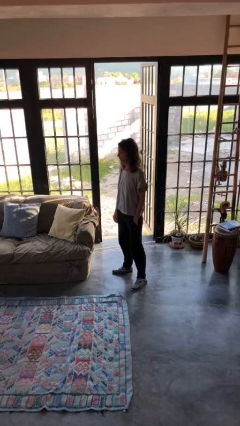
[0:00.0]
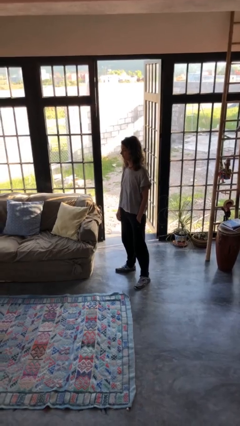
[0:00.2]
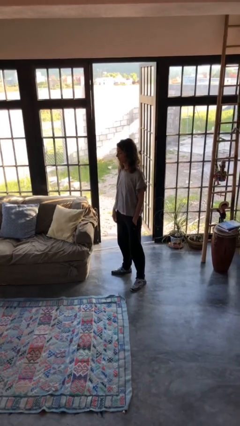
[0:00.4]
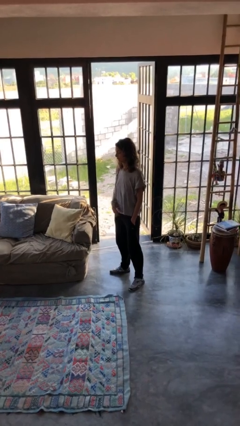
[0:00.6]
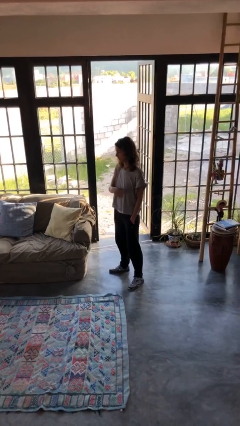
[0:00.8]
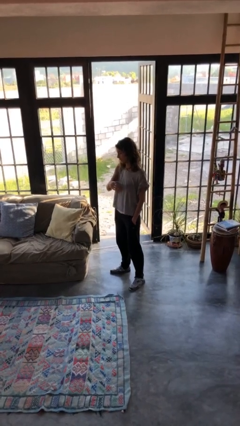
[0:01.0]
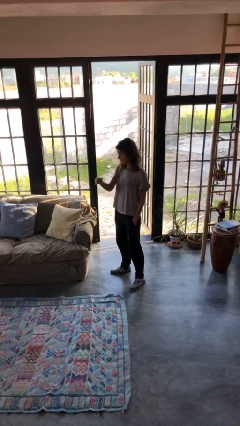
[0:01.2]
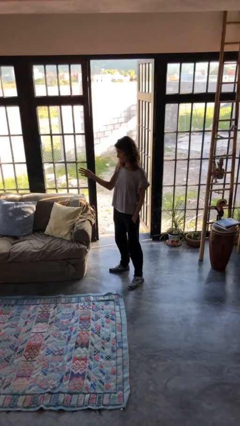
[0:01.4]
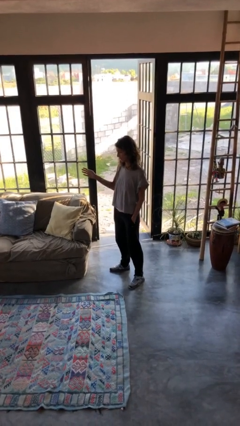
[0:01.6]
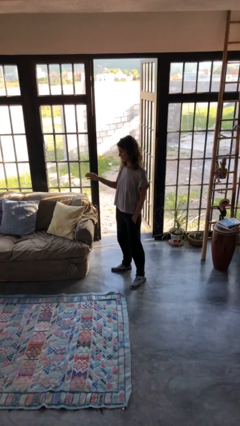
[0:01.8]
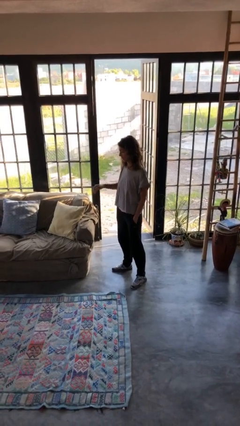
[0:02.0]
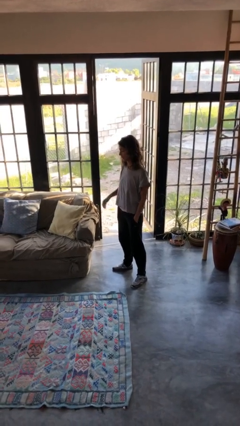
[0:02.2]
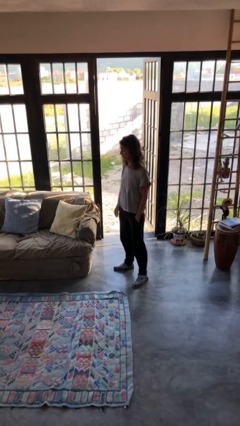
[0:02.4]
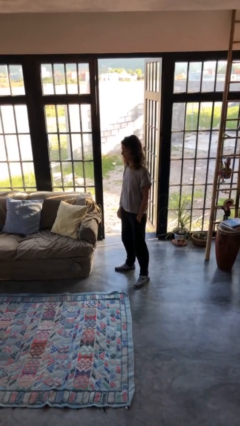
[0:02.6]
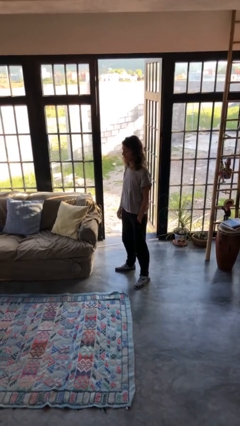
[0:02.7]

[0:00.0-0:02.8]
person gestures swipe right

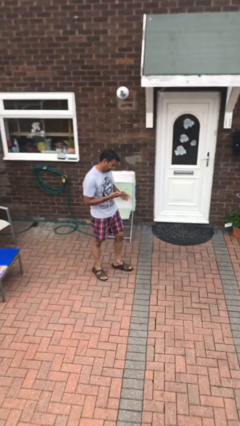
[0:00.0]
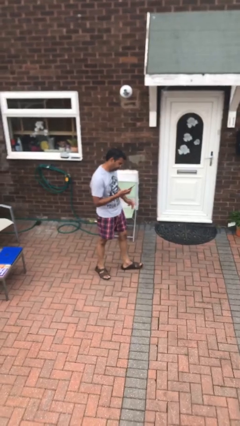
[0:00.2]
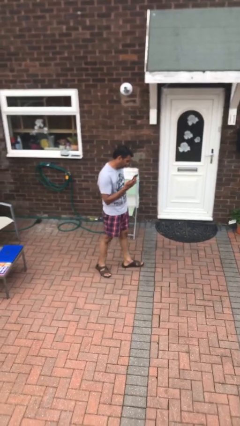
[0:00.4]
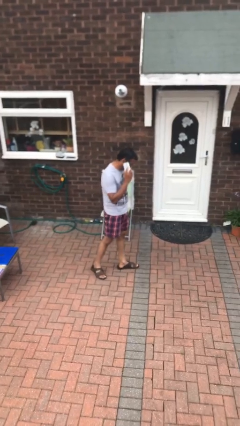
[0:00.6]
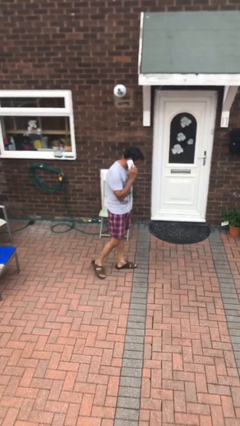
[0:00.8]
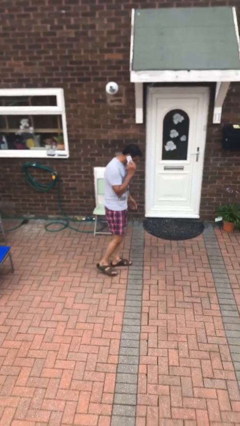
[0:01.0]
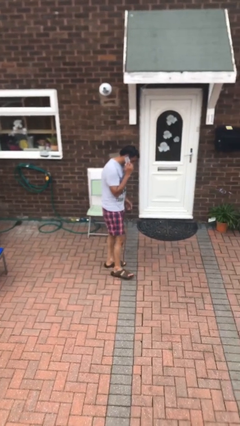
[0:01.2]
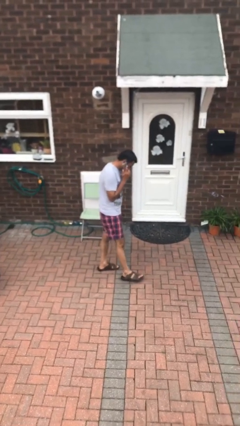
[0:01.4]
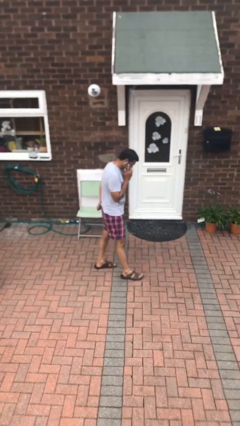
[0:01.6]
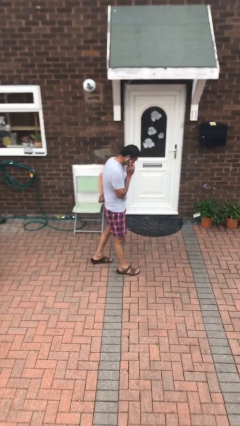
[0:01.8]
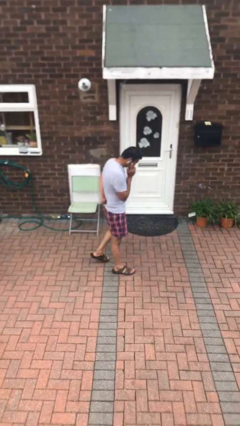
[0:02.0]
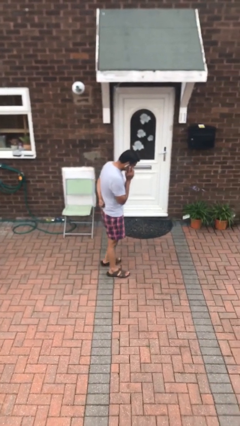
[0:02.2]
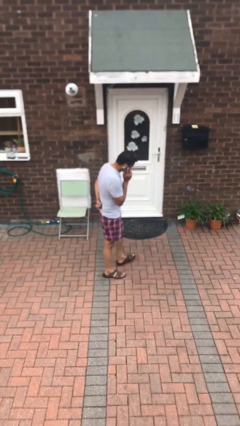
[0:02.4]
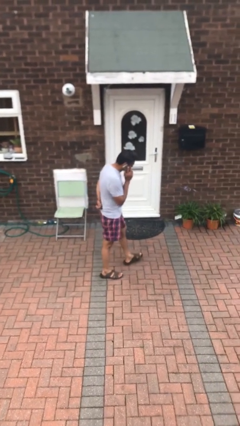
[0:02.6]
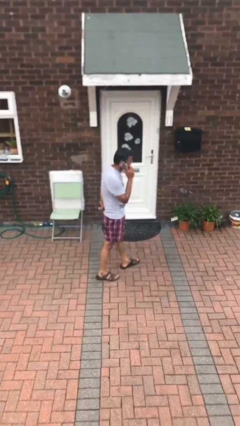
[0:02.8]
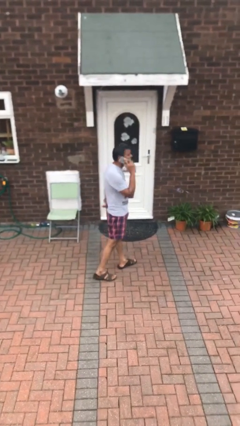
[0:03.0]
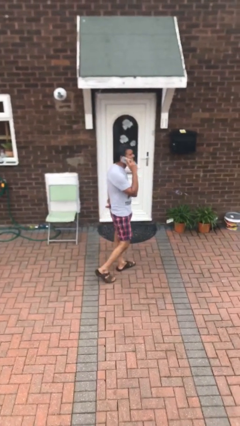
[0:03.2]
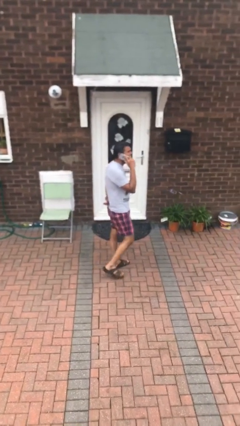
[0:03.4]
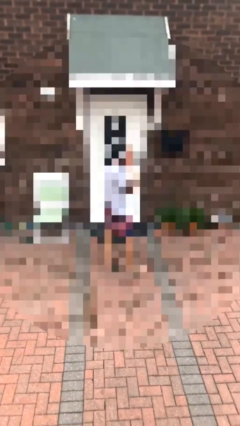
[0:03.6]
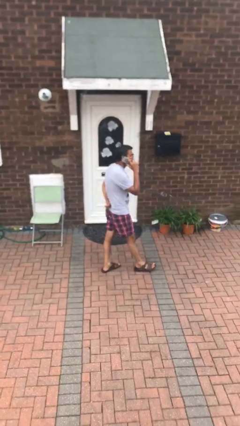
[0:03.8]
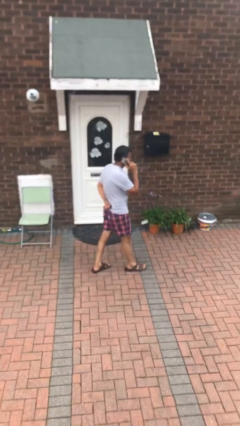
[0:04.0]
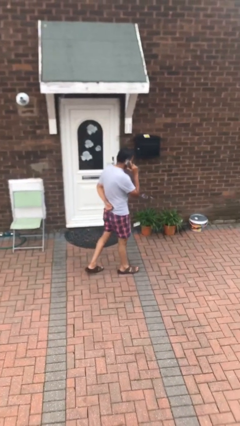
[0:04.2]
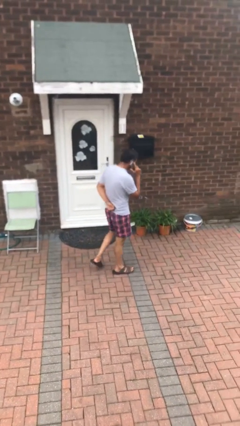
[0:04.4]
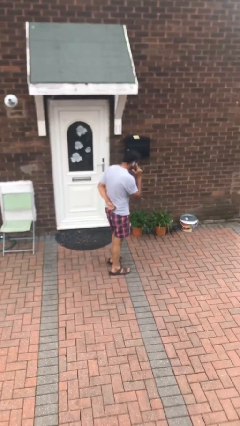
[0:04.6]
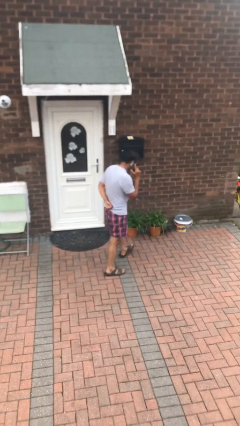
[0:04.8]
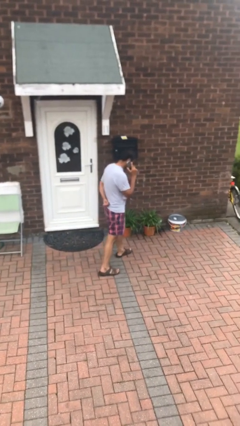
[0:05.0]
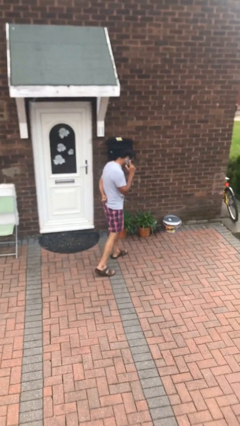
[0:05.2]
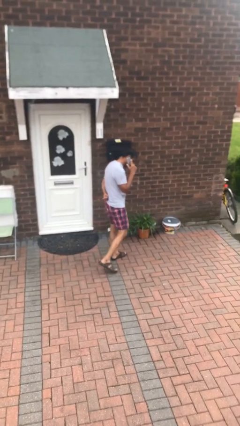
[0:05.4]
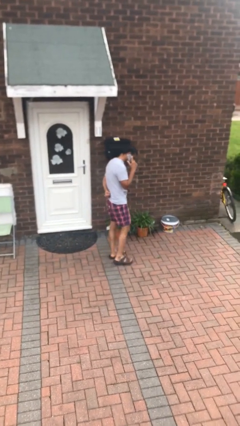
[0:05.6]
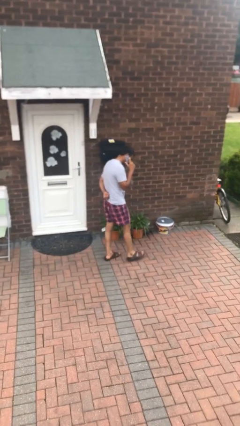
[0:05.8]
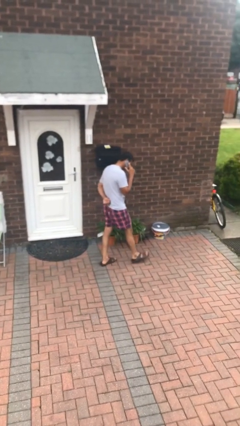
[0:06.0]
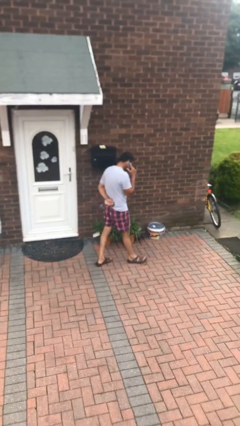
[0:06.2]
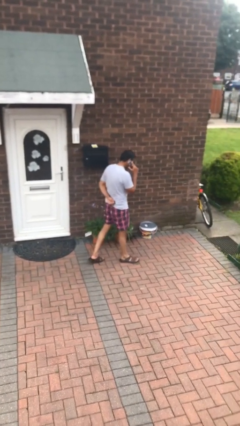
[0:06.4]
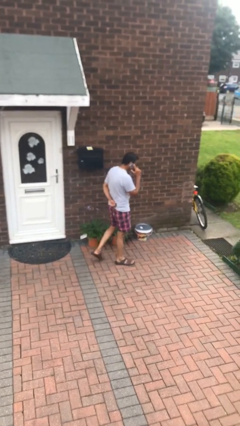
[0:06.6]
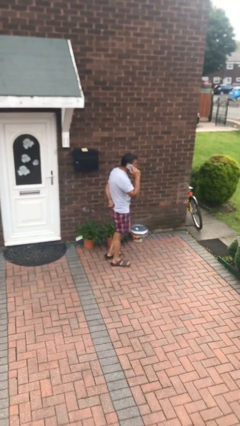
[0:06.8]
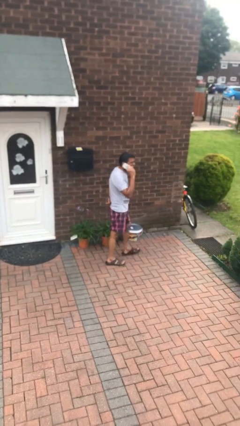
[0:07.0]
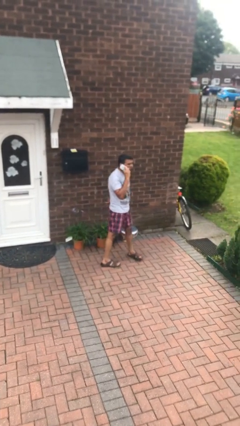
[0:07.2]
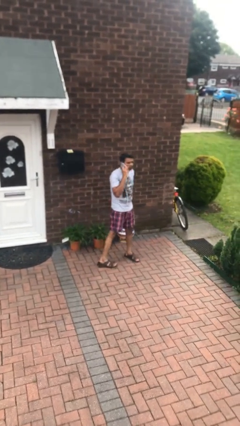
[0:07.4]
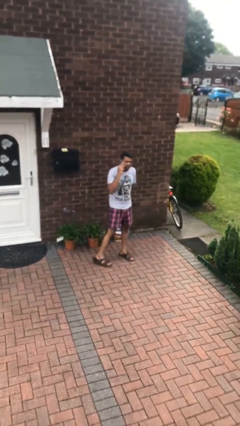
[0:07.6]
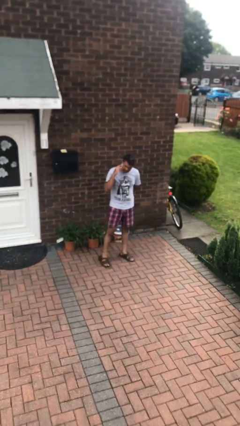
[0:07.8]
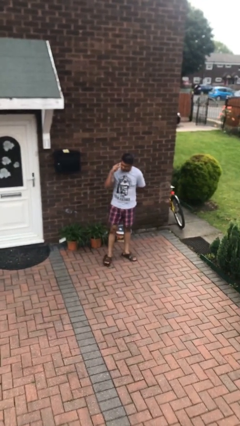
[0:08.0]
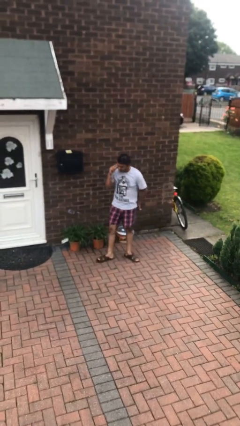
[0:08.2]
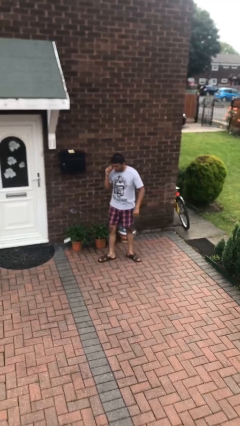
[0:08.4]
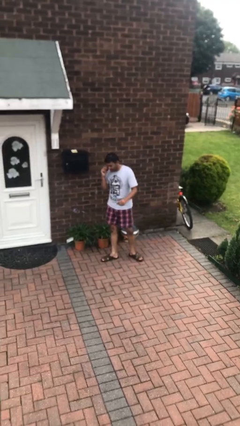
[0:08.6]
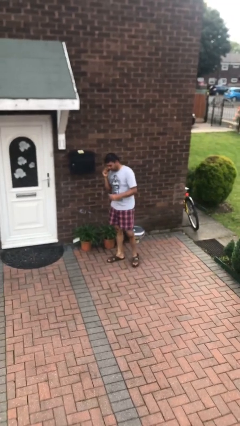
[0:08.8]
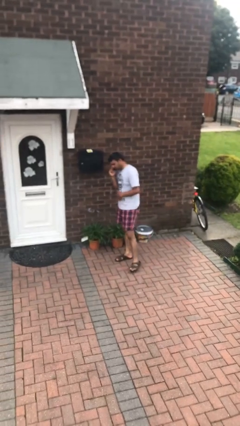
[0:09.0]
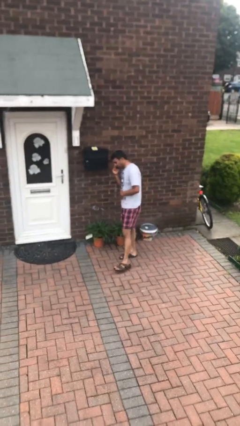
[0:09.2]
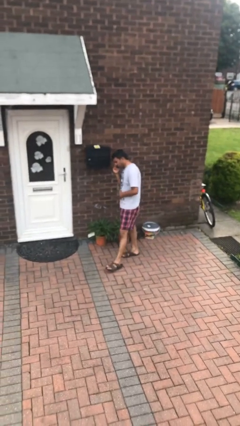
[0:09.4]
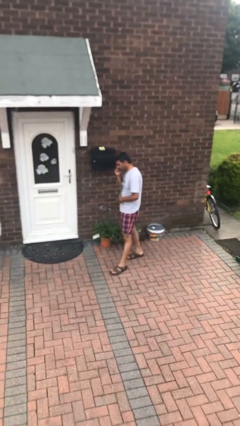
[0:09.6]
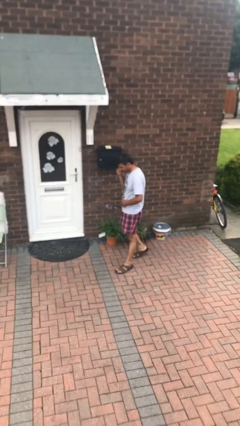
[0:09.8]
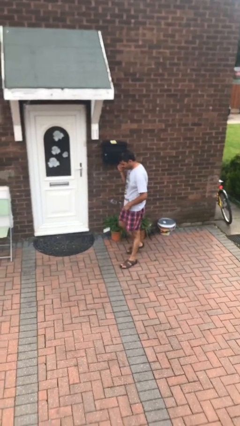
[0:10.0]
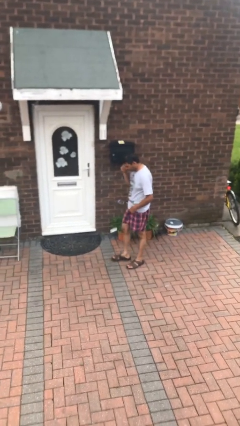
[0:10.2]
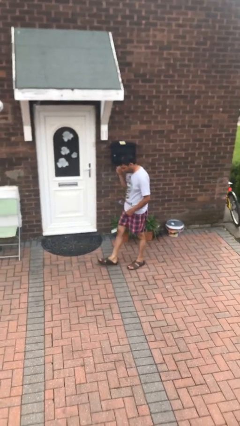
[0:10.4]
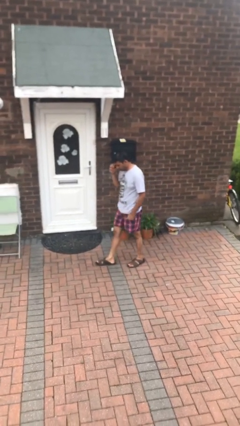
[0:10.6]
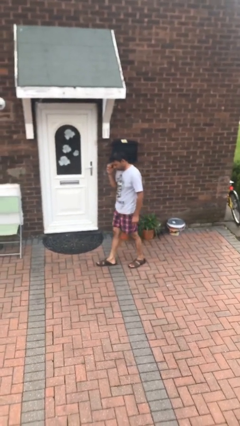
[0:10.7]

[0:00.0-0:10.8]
person talks on phone

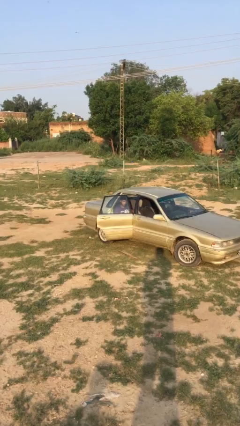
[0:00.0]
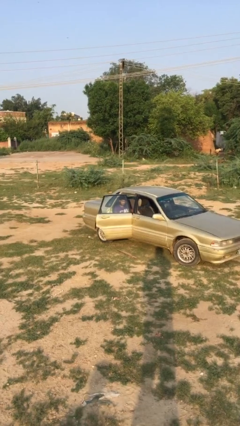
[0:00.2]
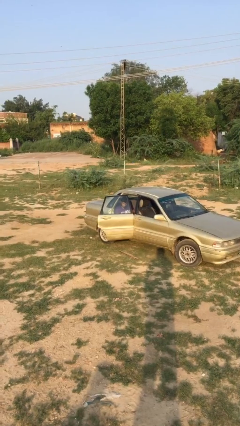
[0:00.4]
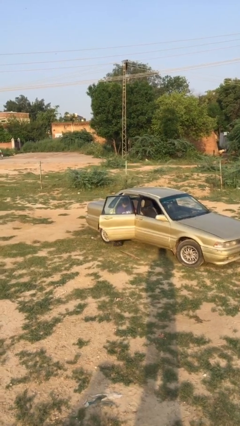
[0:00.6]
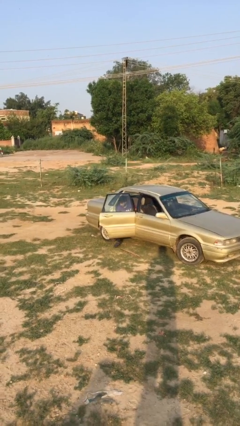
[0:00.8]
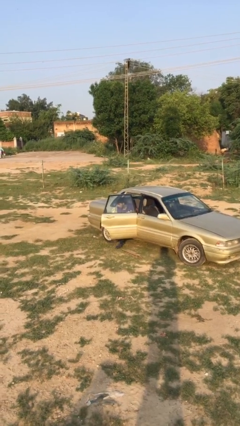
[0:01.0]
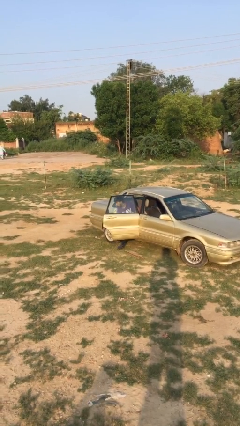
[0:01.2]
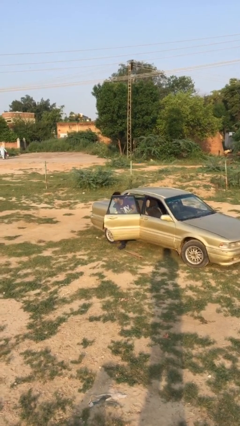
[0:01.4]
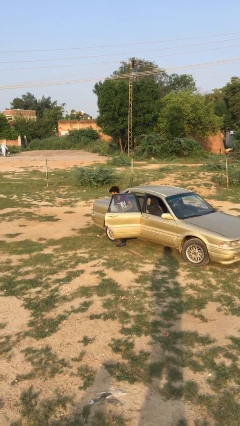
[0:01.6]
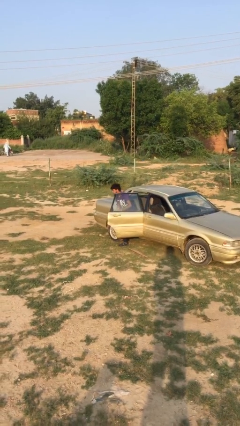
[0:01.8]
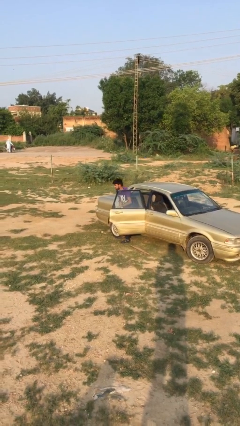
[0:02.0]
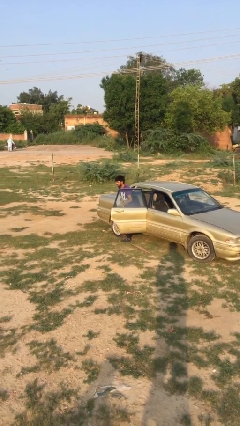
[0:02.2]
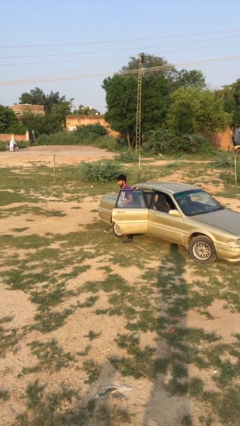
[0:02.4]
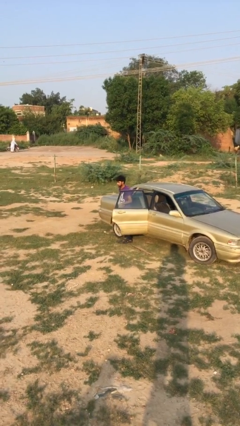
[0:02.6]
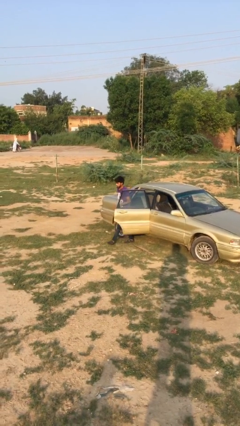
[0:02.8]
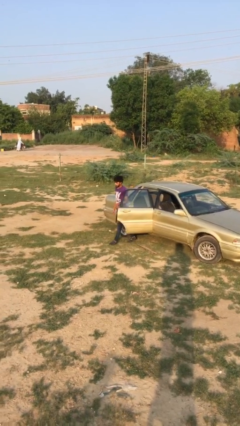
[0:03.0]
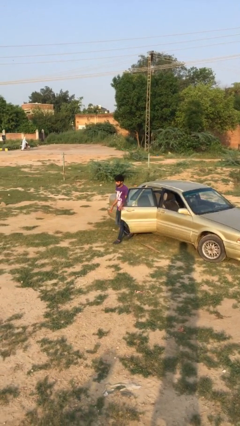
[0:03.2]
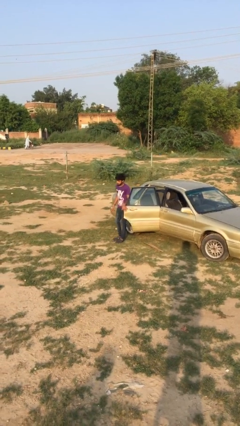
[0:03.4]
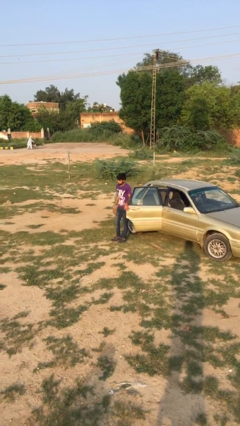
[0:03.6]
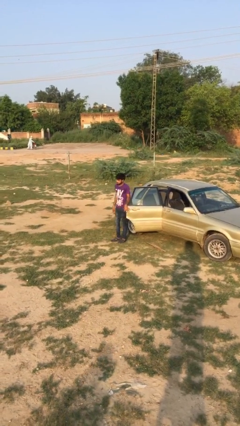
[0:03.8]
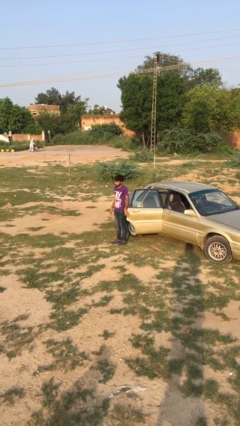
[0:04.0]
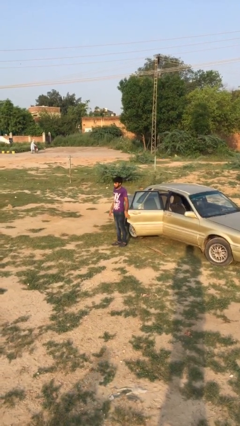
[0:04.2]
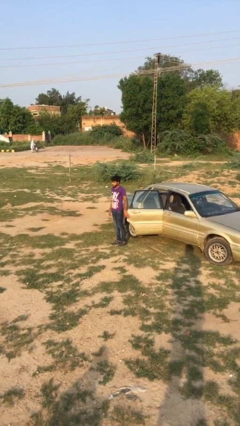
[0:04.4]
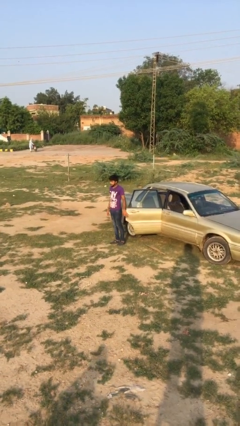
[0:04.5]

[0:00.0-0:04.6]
person exits car
